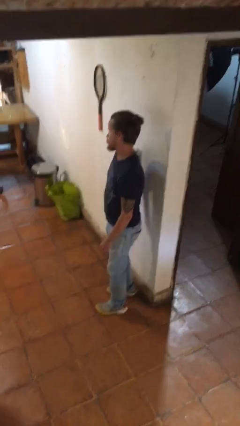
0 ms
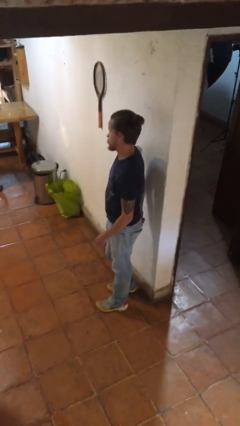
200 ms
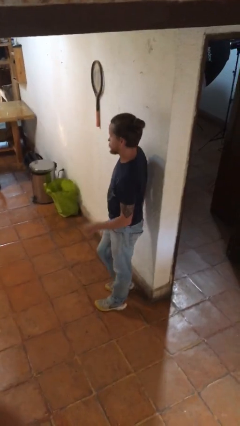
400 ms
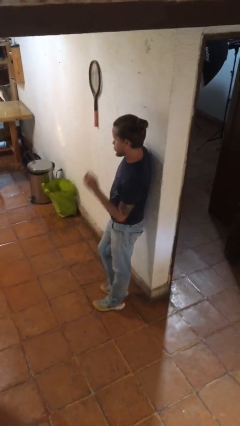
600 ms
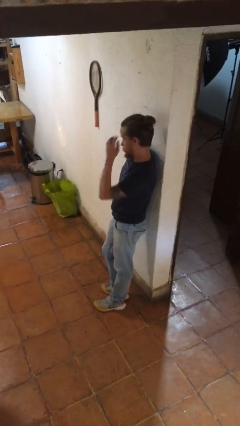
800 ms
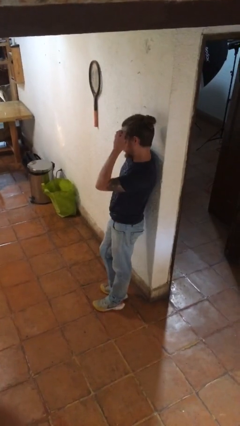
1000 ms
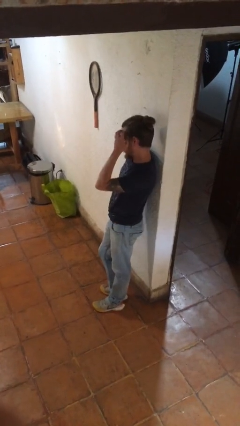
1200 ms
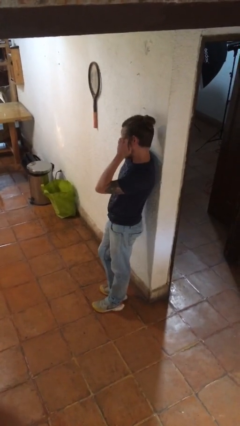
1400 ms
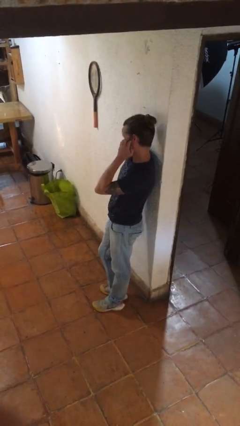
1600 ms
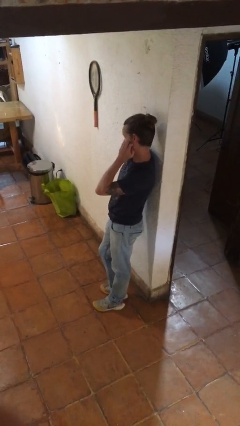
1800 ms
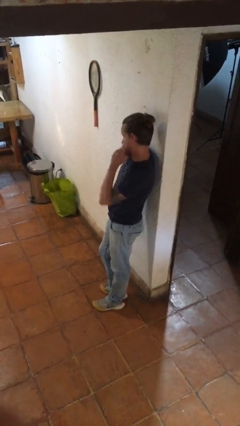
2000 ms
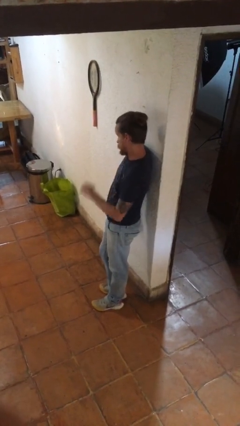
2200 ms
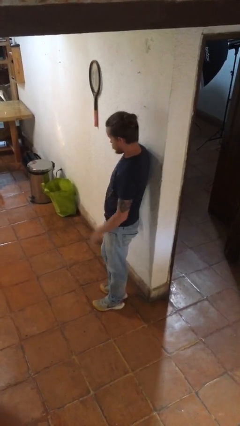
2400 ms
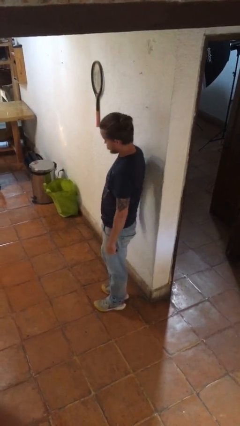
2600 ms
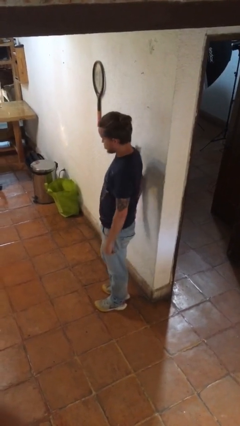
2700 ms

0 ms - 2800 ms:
person scratches face

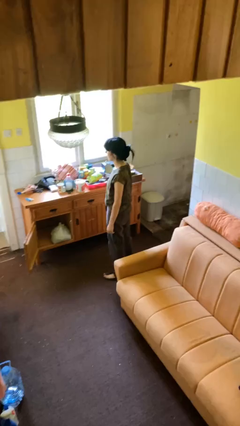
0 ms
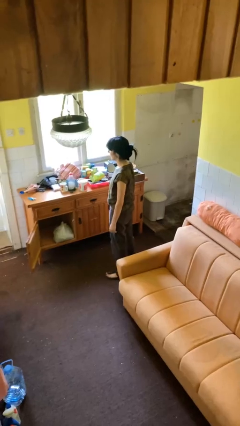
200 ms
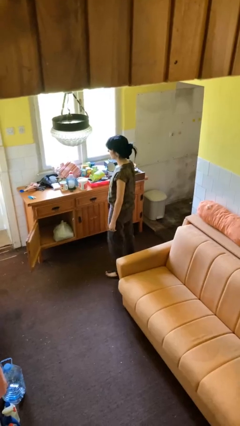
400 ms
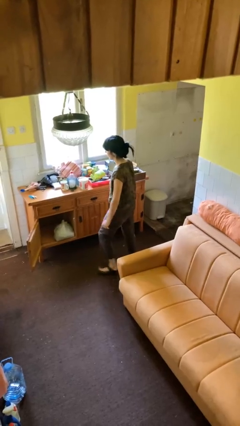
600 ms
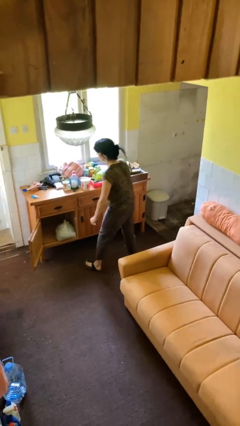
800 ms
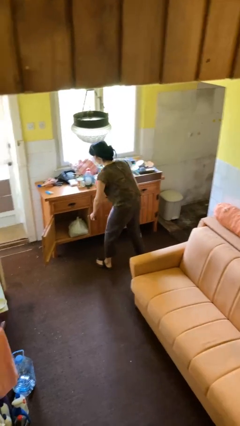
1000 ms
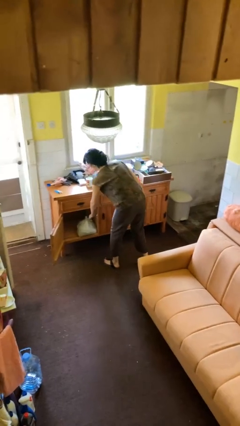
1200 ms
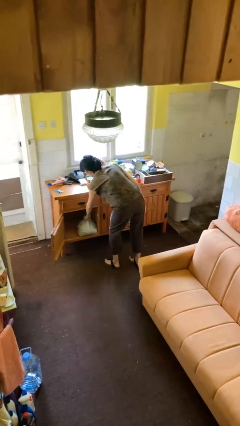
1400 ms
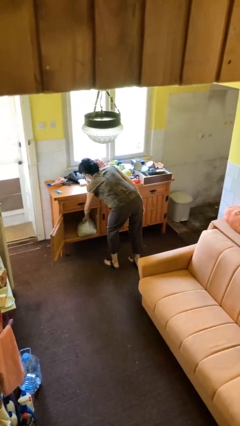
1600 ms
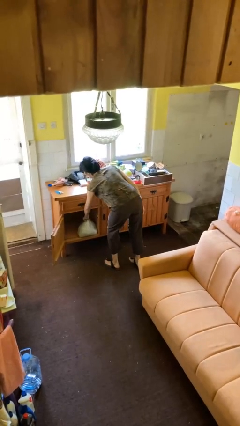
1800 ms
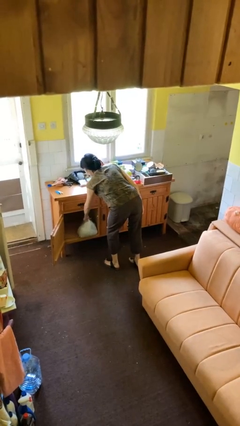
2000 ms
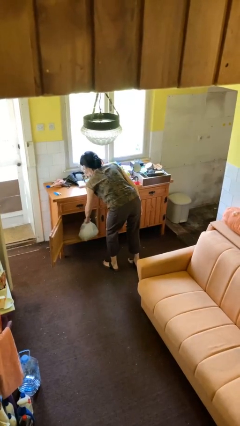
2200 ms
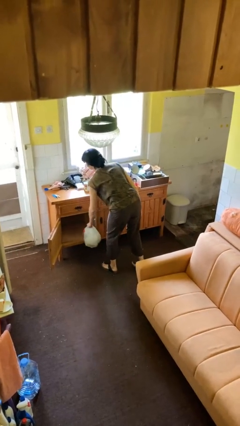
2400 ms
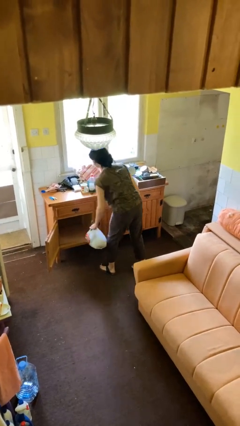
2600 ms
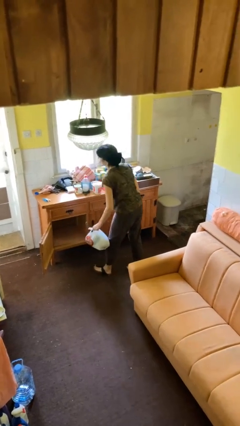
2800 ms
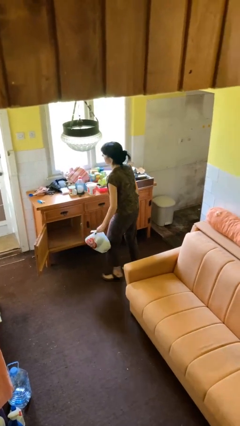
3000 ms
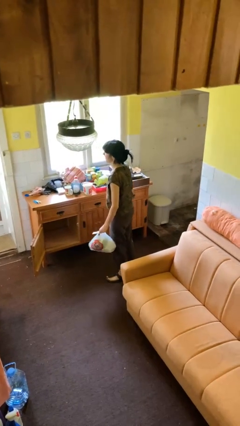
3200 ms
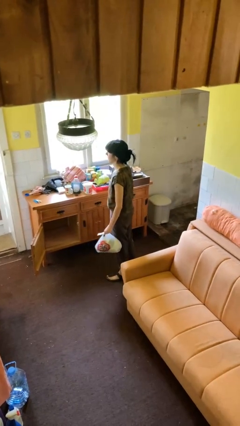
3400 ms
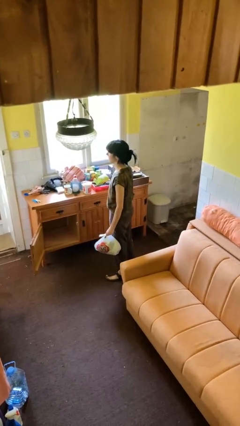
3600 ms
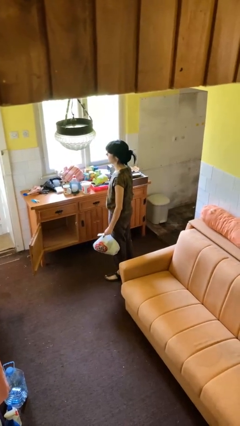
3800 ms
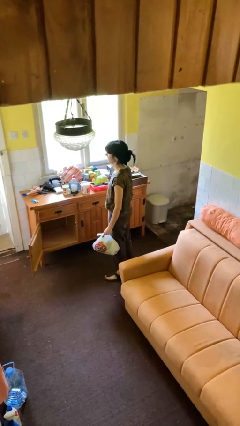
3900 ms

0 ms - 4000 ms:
person picks up object from cabinet

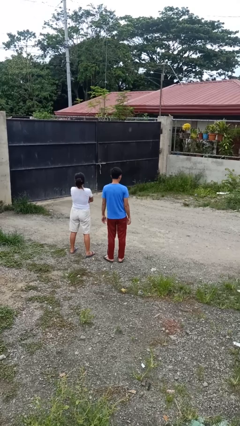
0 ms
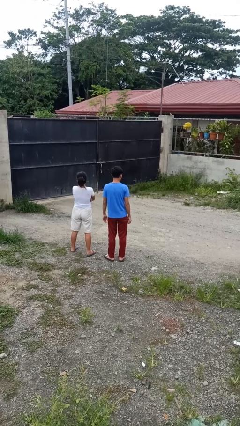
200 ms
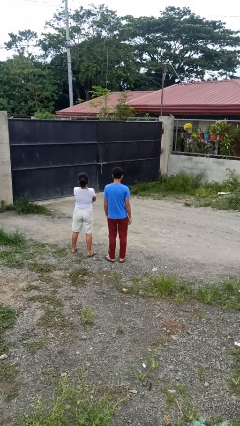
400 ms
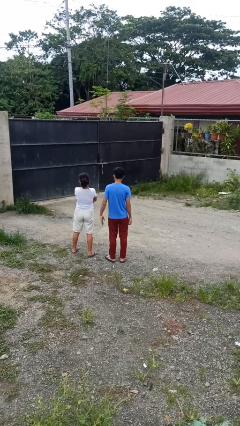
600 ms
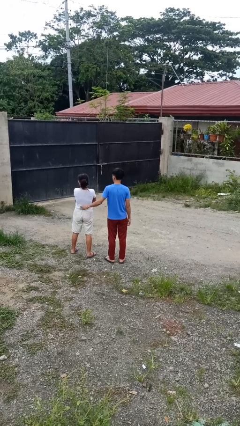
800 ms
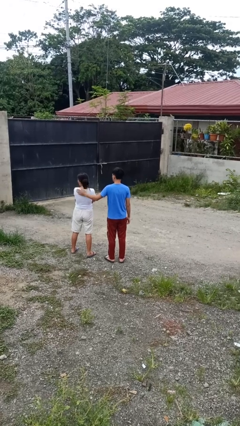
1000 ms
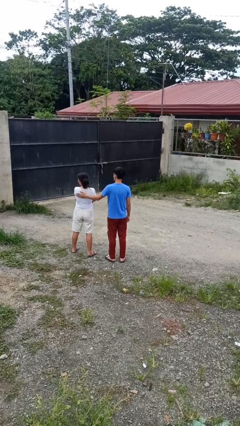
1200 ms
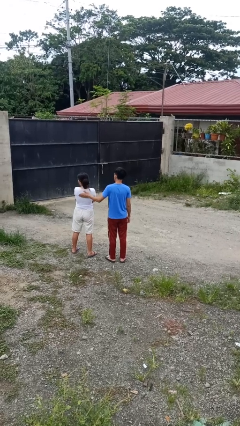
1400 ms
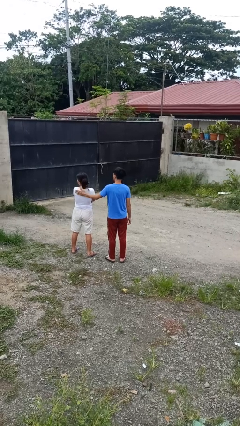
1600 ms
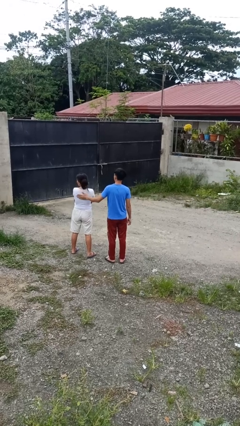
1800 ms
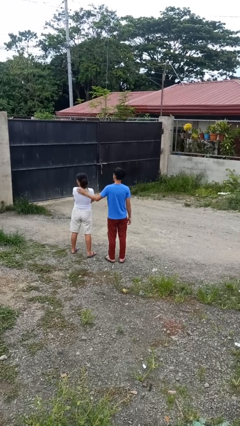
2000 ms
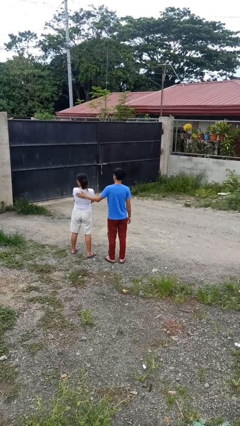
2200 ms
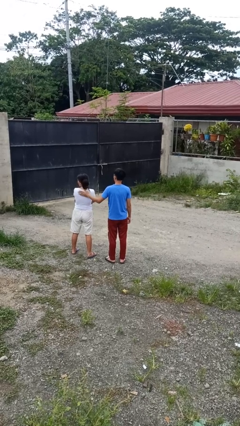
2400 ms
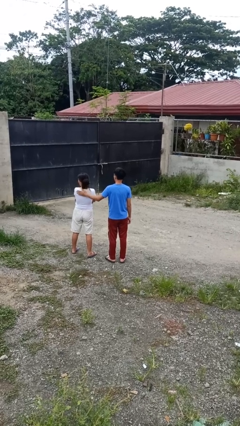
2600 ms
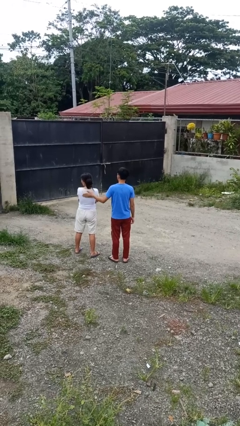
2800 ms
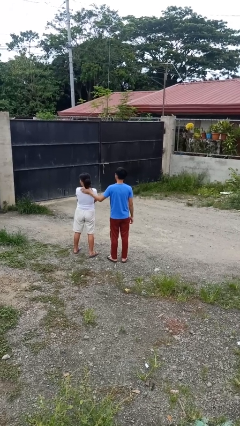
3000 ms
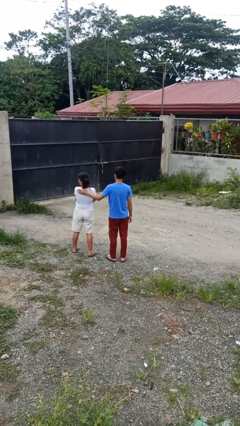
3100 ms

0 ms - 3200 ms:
person touches back of person

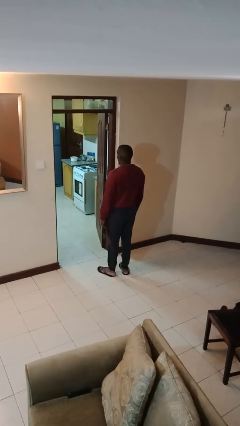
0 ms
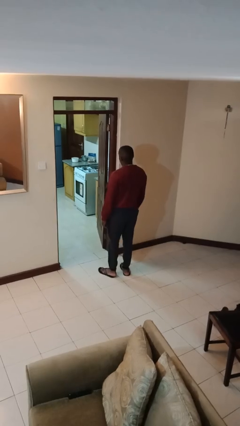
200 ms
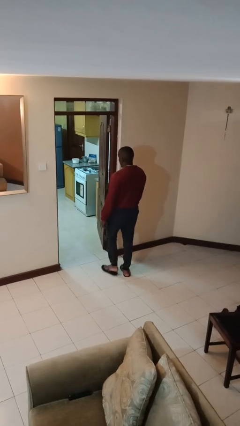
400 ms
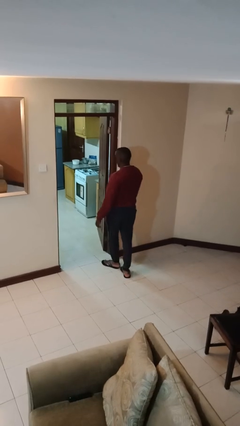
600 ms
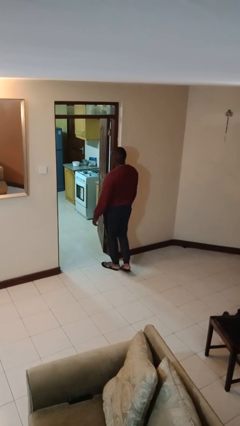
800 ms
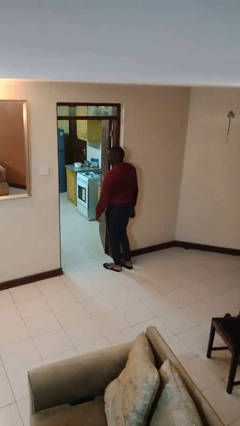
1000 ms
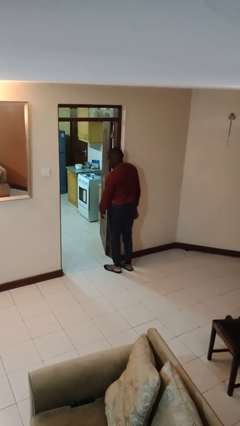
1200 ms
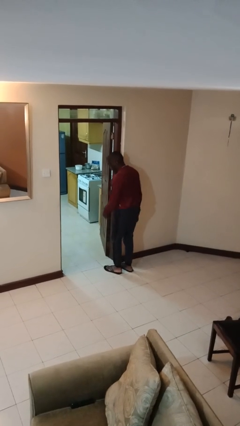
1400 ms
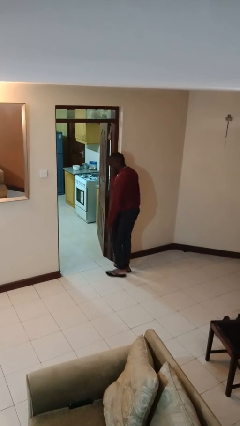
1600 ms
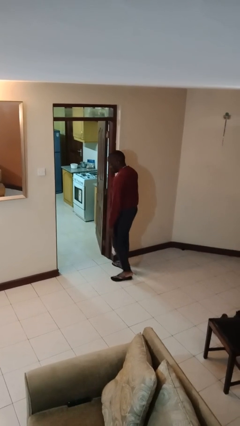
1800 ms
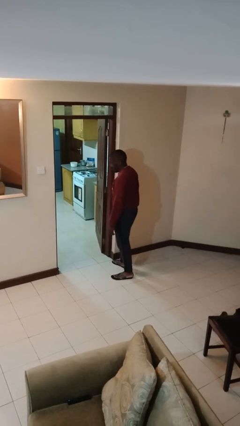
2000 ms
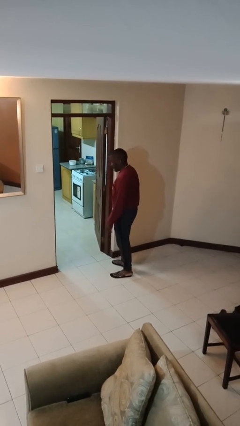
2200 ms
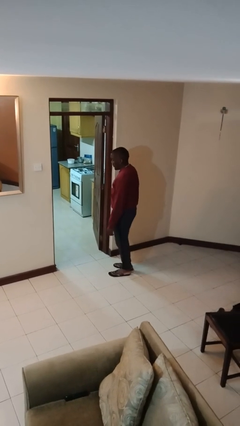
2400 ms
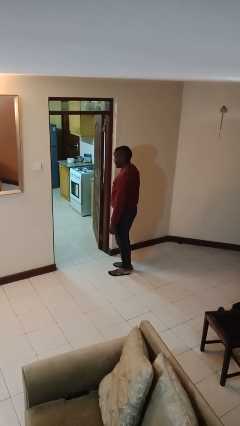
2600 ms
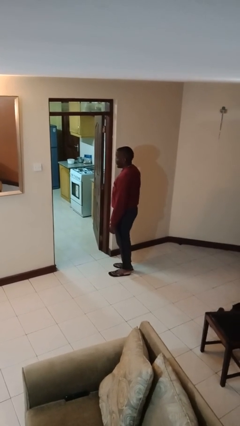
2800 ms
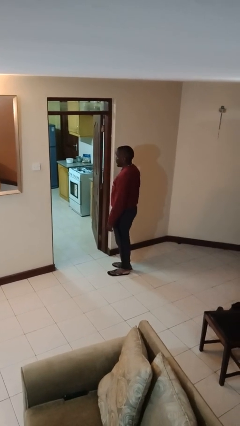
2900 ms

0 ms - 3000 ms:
person bumps into wall

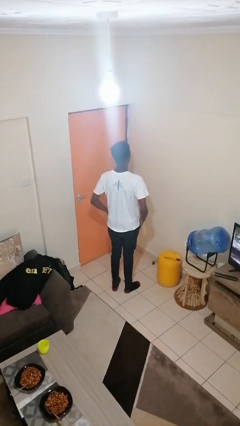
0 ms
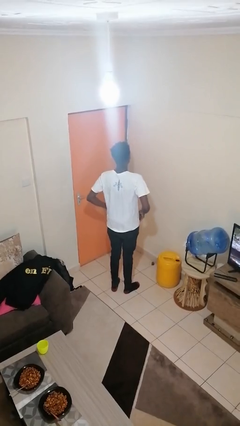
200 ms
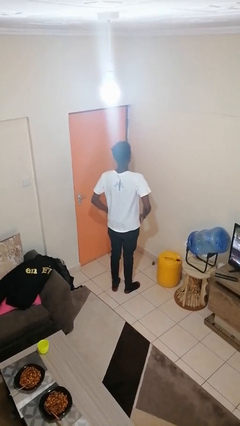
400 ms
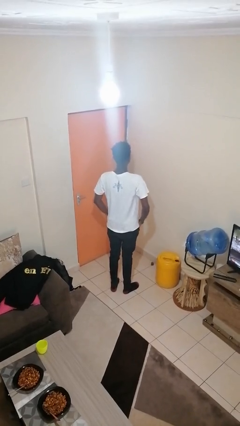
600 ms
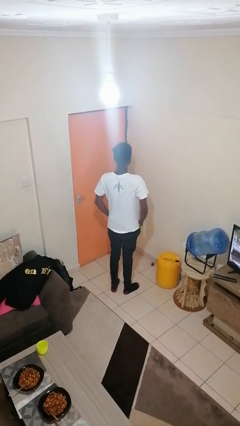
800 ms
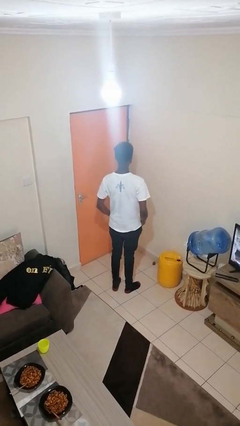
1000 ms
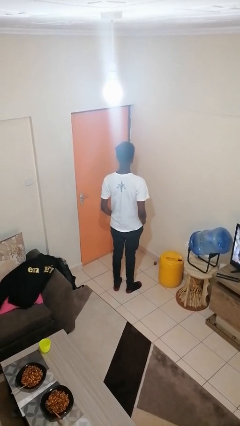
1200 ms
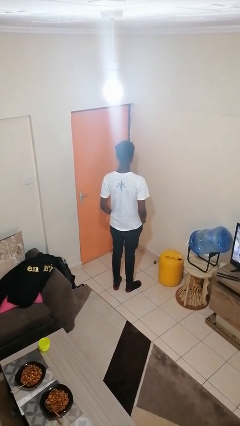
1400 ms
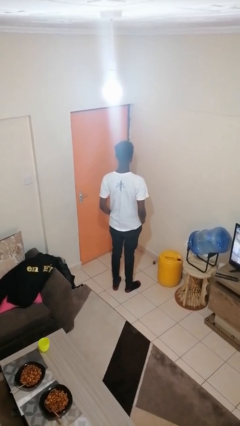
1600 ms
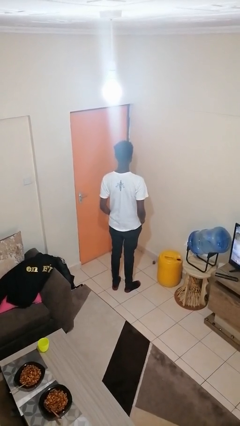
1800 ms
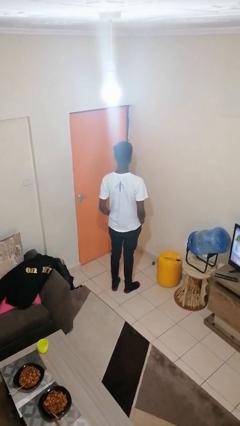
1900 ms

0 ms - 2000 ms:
person puts hands in back pockets

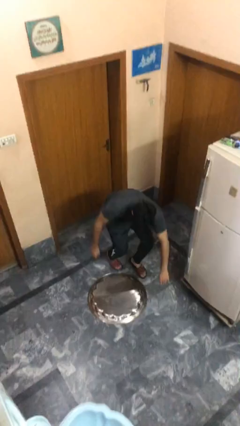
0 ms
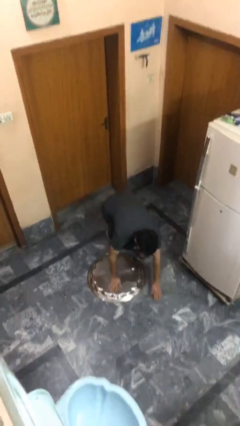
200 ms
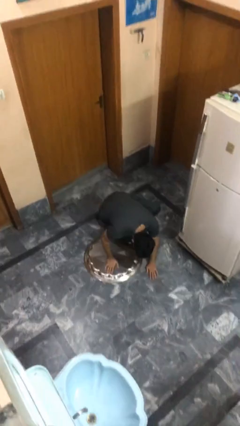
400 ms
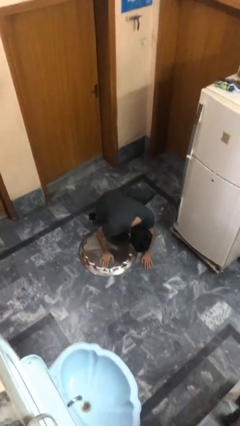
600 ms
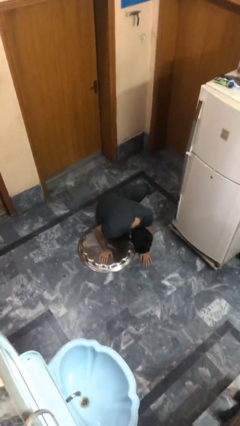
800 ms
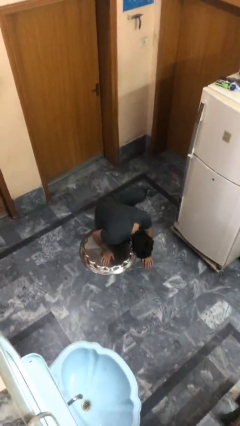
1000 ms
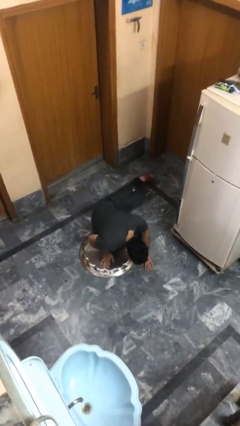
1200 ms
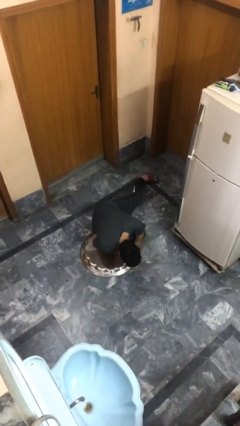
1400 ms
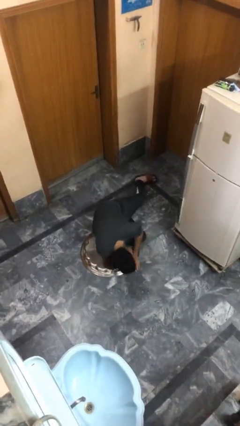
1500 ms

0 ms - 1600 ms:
person trips on object on floor

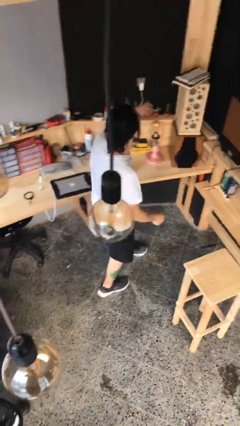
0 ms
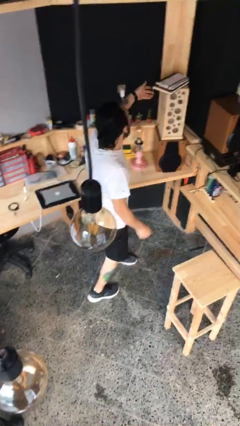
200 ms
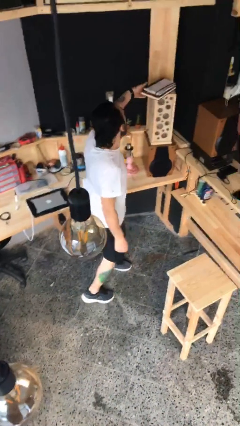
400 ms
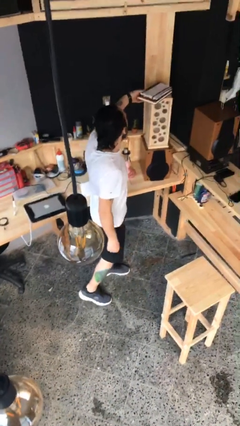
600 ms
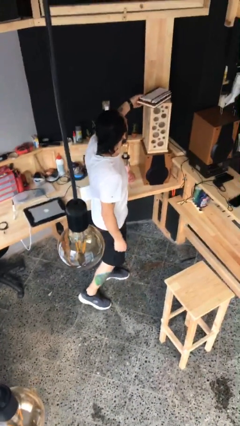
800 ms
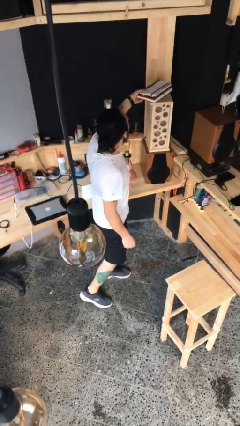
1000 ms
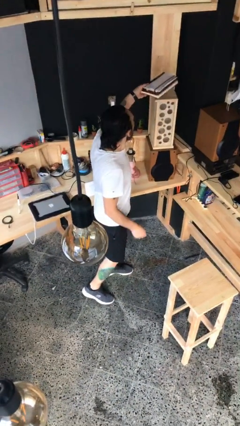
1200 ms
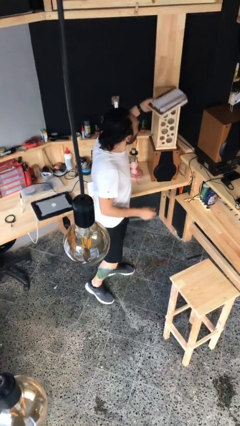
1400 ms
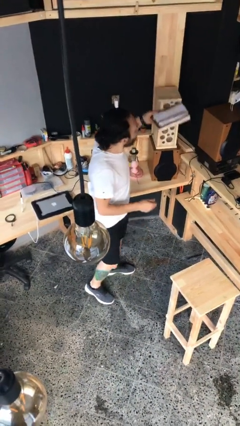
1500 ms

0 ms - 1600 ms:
person picks up object from shelf
